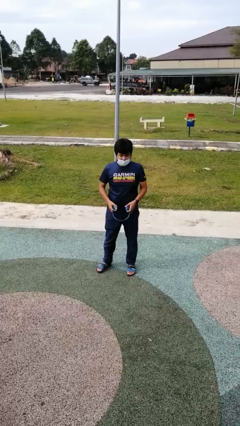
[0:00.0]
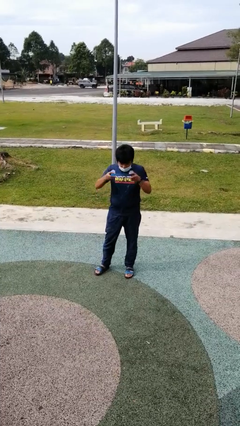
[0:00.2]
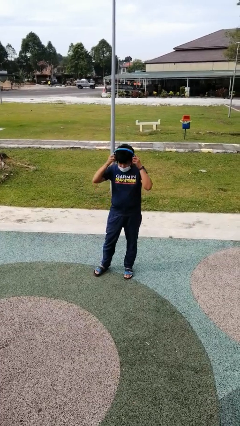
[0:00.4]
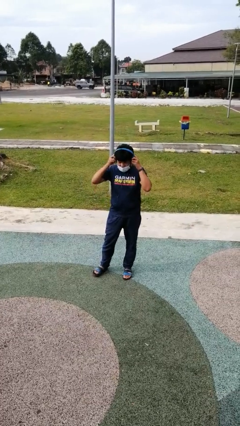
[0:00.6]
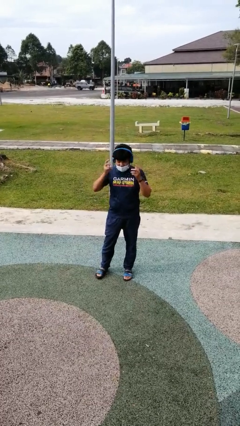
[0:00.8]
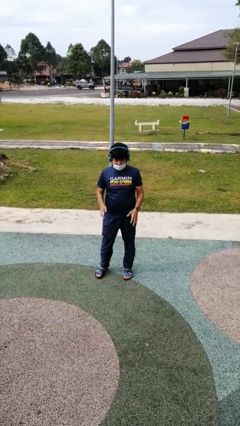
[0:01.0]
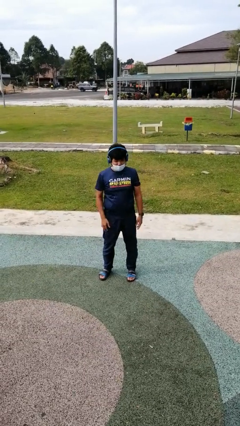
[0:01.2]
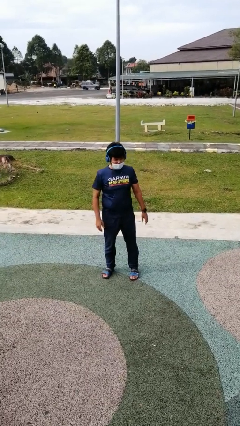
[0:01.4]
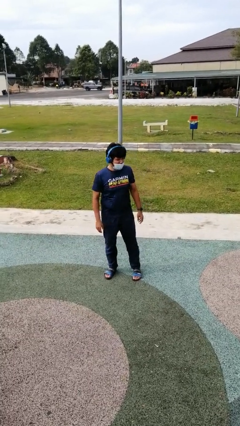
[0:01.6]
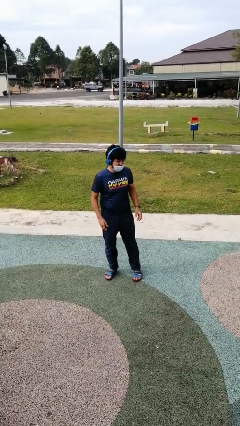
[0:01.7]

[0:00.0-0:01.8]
person puts on headphones

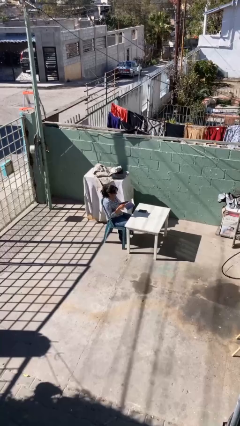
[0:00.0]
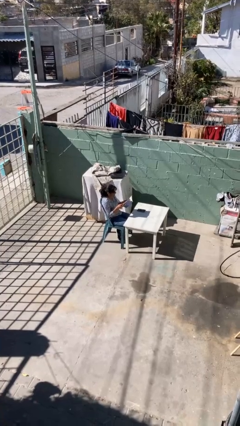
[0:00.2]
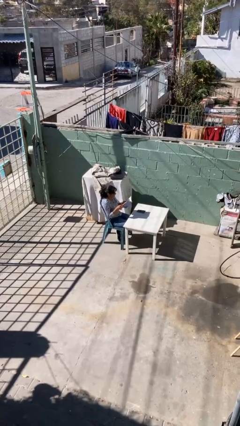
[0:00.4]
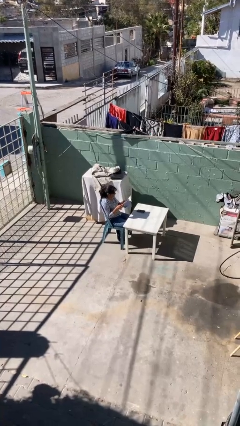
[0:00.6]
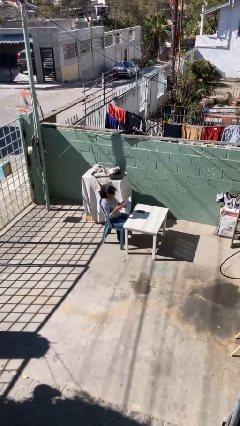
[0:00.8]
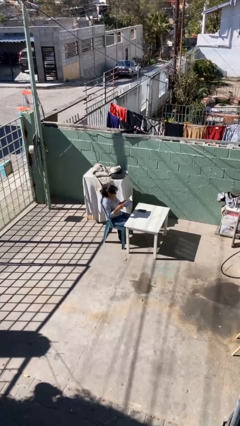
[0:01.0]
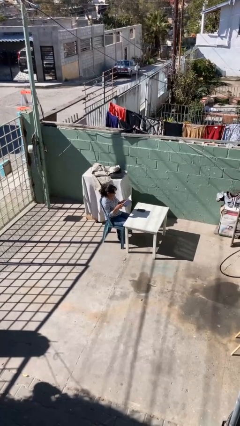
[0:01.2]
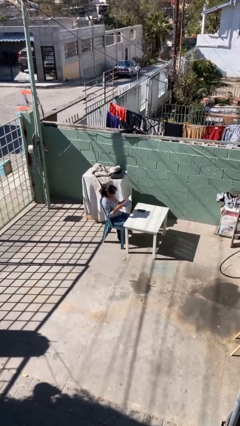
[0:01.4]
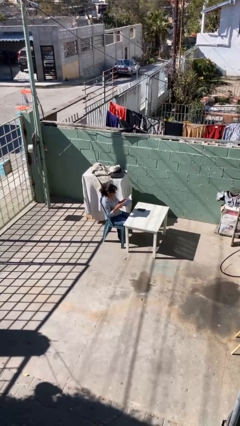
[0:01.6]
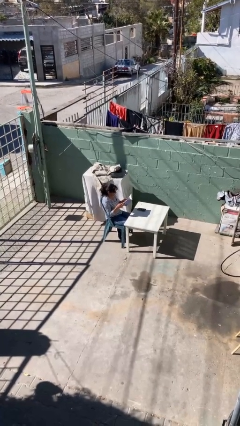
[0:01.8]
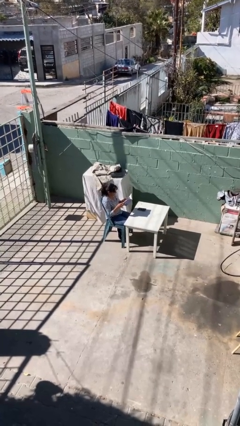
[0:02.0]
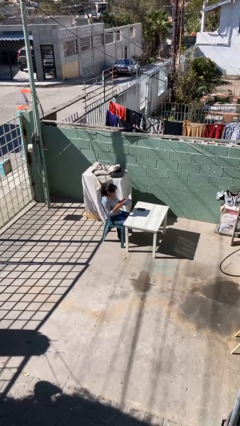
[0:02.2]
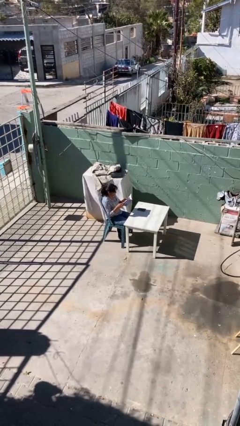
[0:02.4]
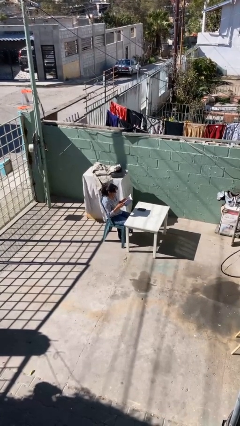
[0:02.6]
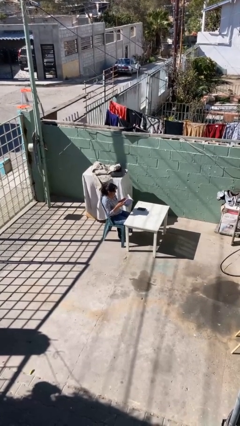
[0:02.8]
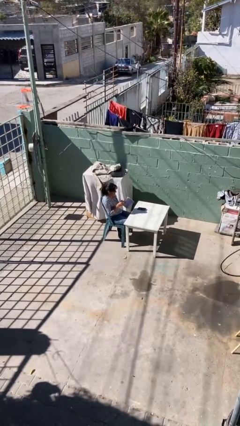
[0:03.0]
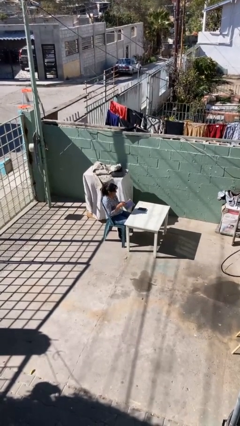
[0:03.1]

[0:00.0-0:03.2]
person reads document

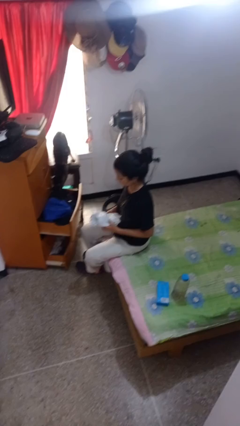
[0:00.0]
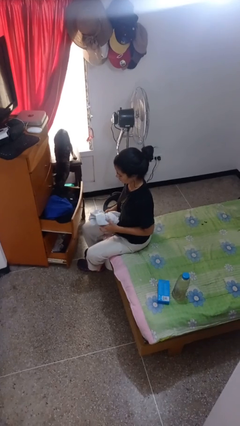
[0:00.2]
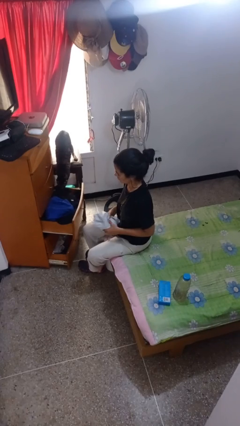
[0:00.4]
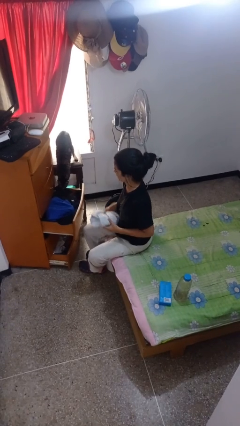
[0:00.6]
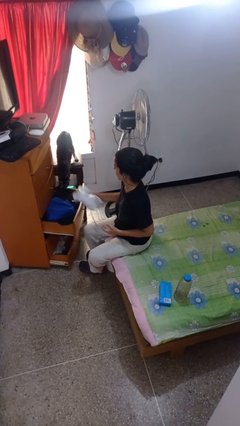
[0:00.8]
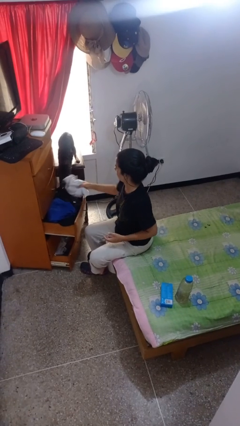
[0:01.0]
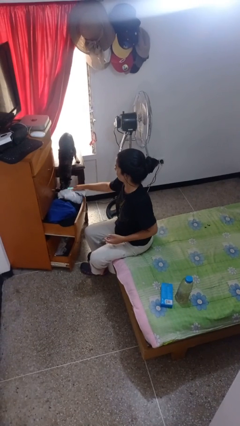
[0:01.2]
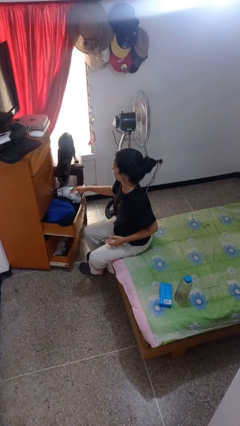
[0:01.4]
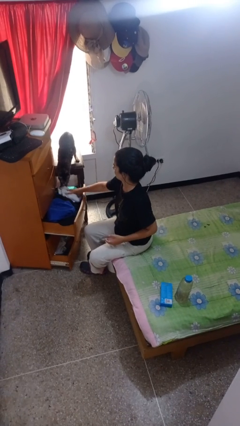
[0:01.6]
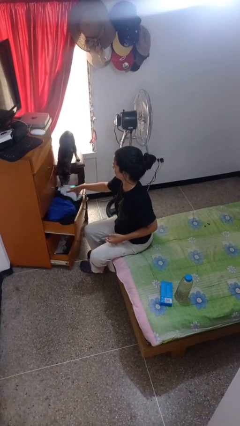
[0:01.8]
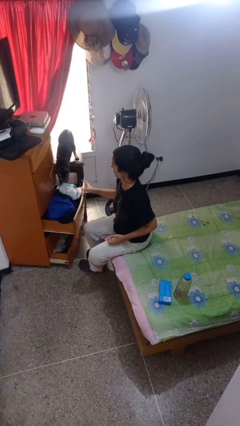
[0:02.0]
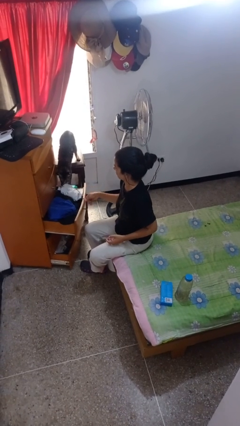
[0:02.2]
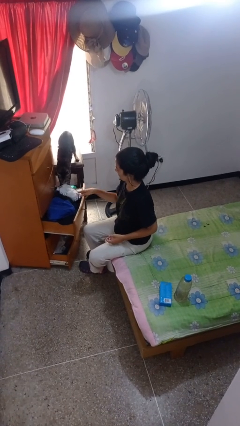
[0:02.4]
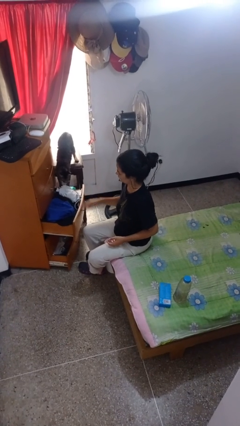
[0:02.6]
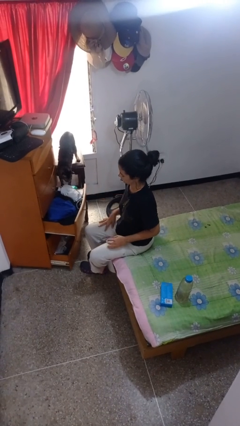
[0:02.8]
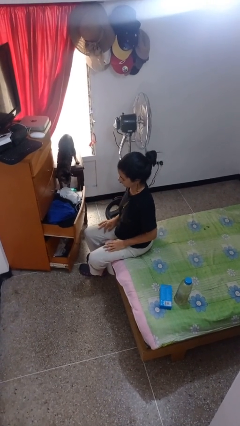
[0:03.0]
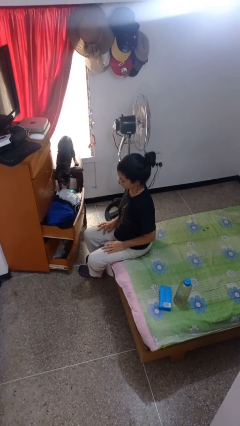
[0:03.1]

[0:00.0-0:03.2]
person puts clothes into dresser

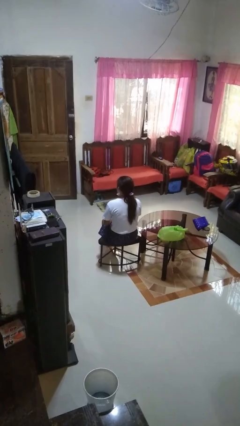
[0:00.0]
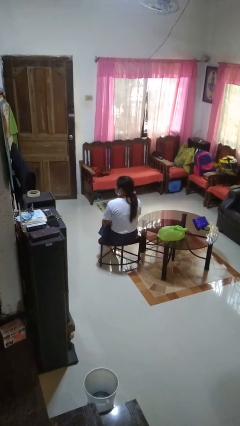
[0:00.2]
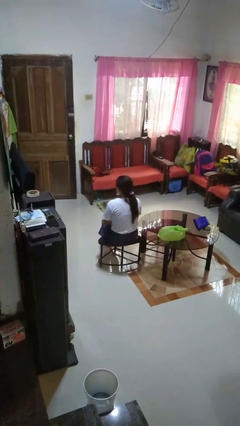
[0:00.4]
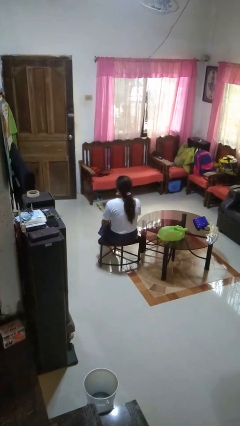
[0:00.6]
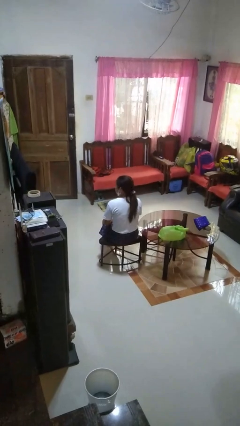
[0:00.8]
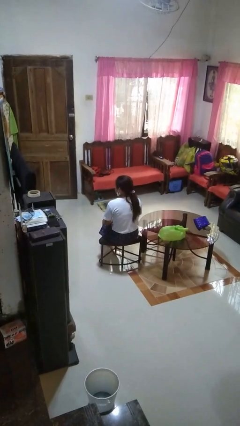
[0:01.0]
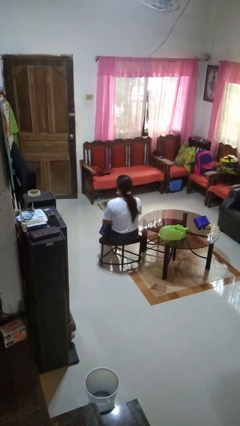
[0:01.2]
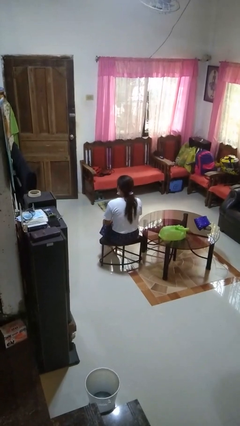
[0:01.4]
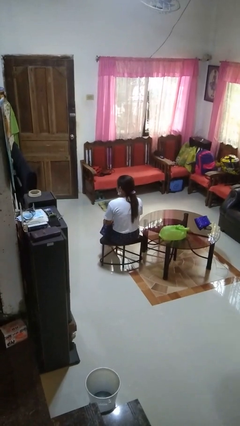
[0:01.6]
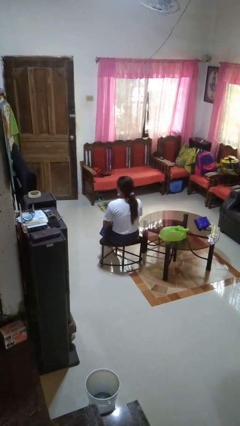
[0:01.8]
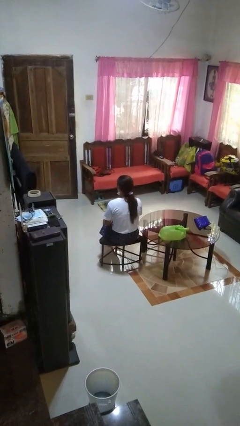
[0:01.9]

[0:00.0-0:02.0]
person shakes head

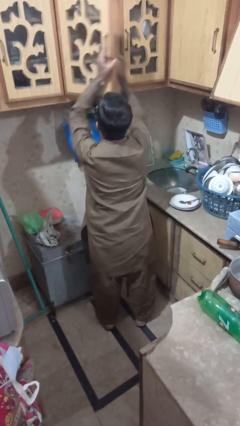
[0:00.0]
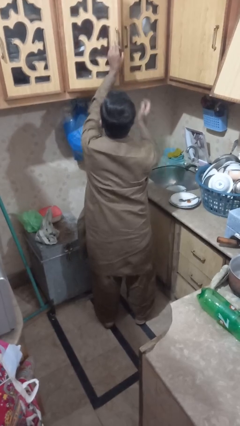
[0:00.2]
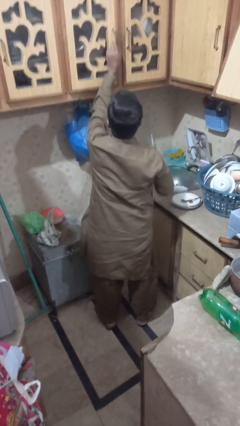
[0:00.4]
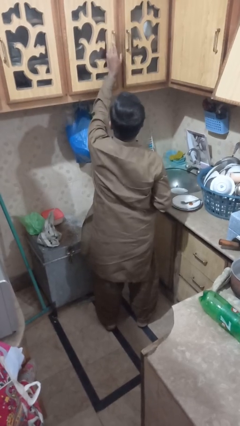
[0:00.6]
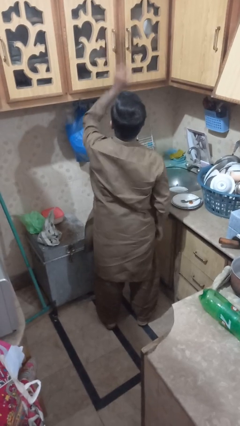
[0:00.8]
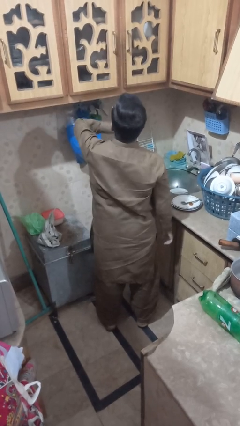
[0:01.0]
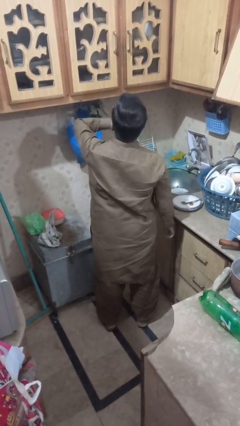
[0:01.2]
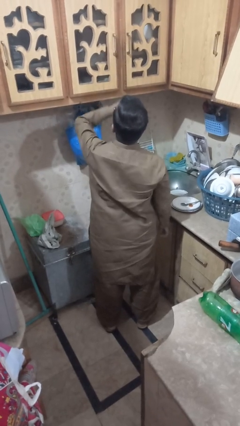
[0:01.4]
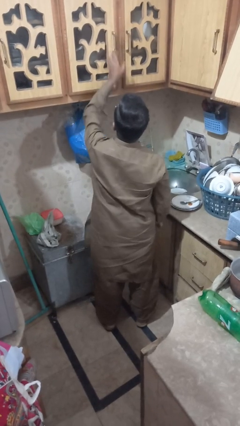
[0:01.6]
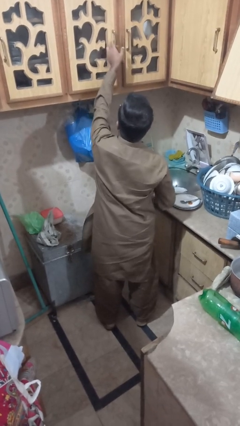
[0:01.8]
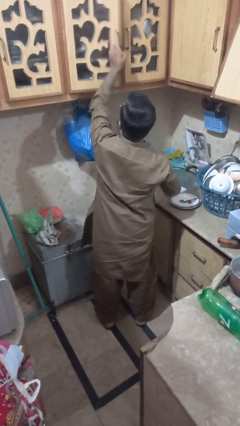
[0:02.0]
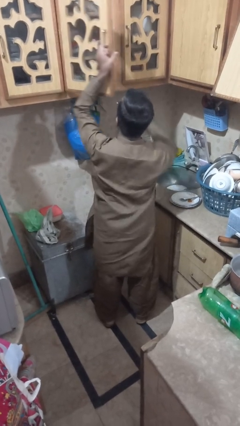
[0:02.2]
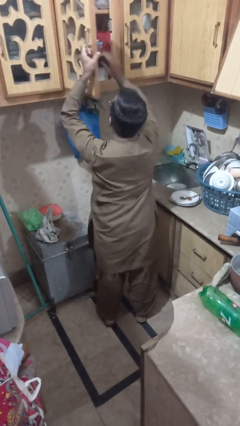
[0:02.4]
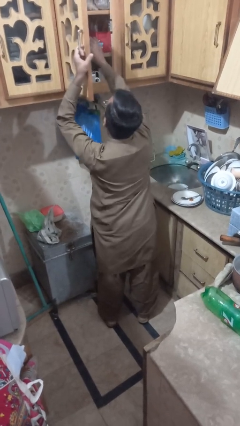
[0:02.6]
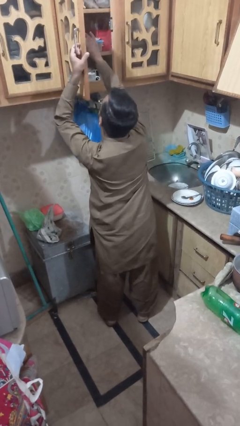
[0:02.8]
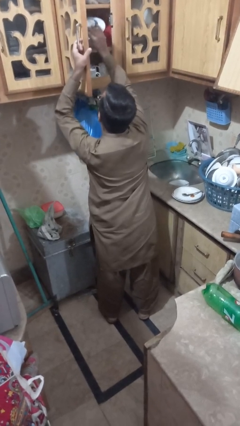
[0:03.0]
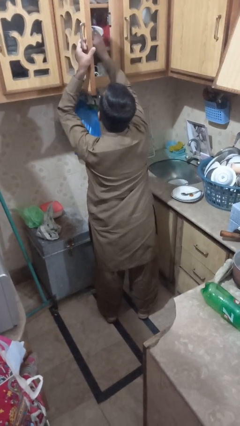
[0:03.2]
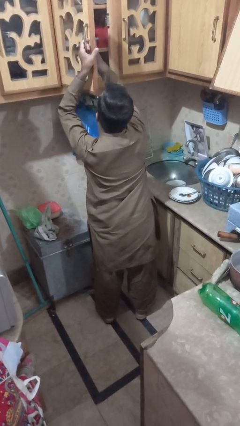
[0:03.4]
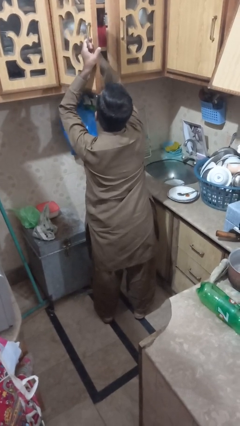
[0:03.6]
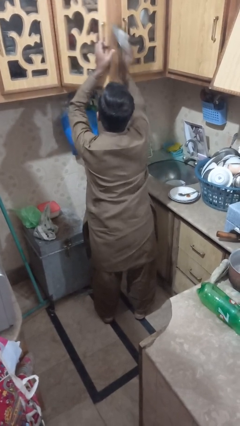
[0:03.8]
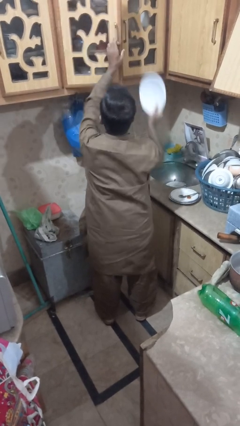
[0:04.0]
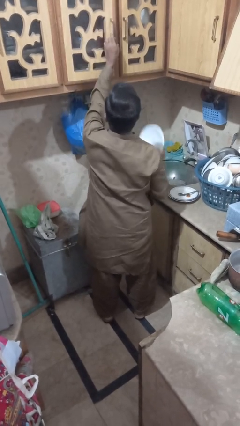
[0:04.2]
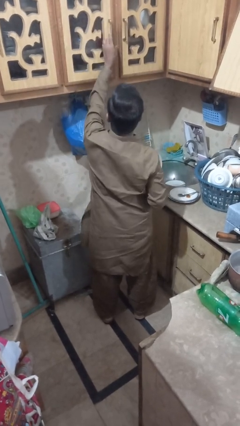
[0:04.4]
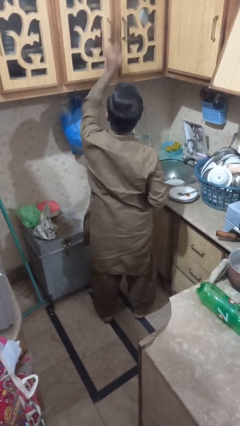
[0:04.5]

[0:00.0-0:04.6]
person takes object from cabinet

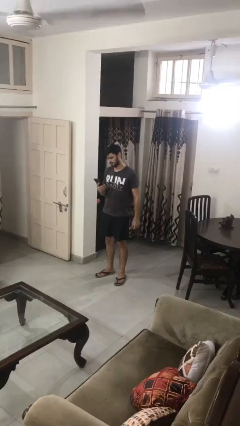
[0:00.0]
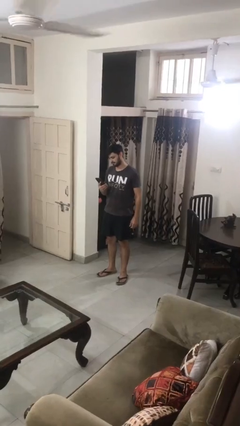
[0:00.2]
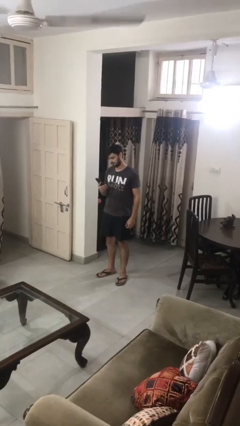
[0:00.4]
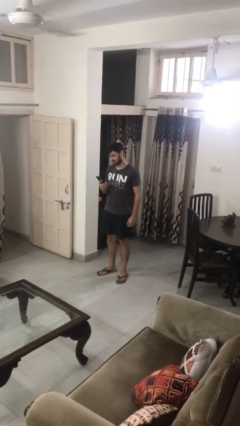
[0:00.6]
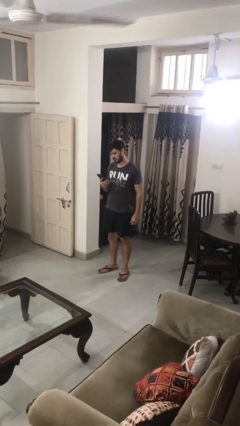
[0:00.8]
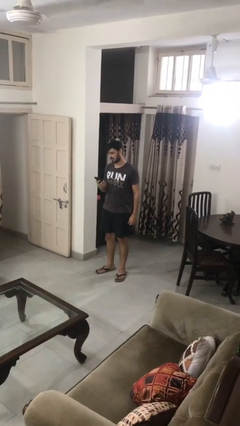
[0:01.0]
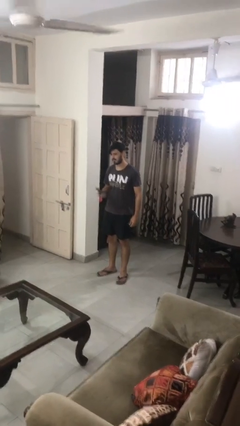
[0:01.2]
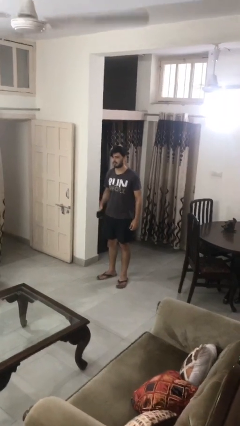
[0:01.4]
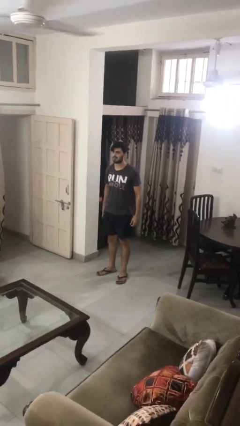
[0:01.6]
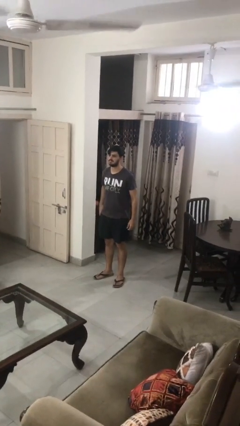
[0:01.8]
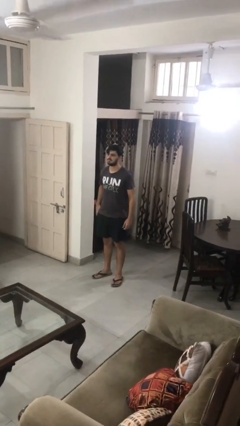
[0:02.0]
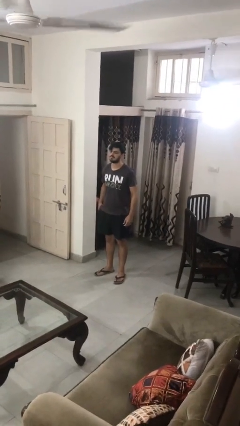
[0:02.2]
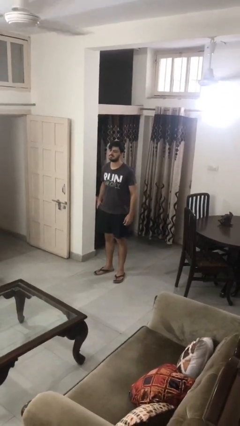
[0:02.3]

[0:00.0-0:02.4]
person puts phone into pocket
